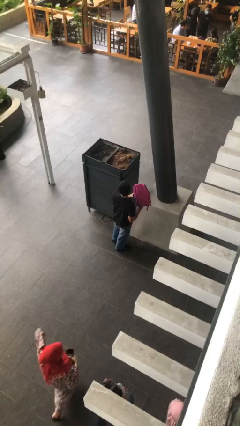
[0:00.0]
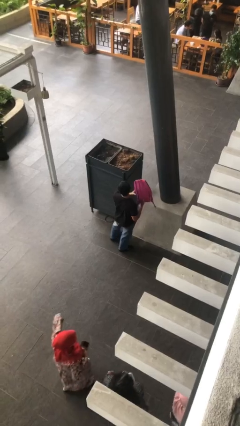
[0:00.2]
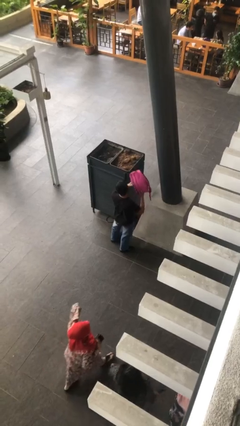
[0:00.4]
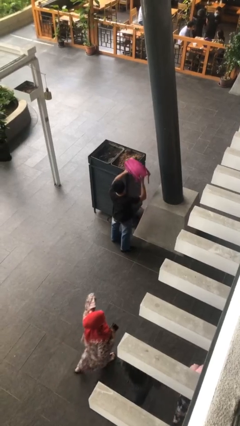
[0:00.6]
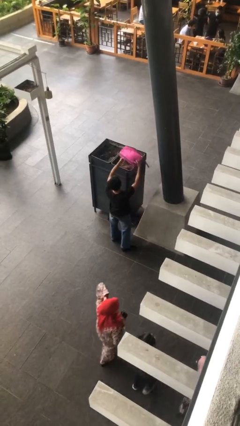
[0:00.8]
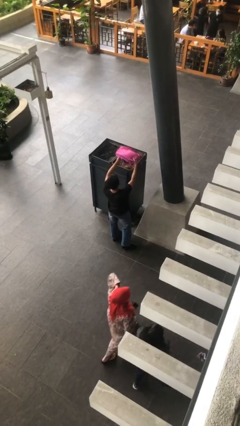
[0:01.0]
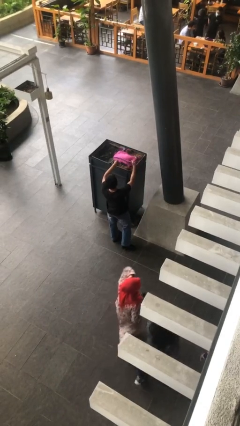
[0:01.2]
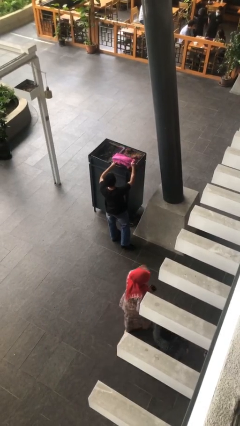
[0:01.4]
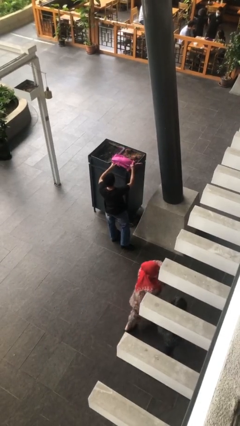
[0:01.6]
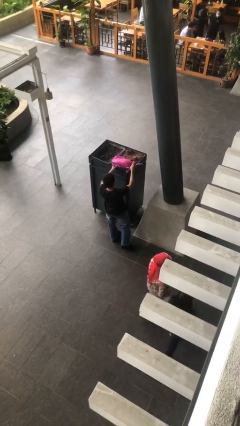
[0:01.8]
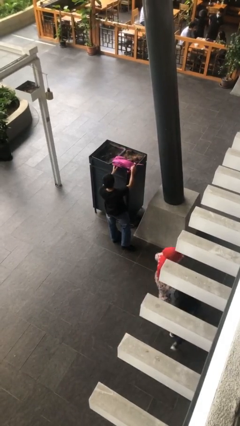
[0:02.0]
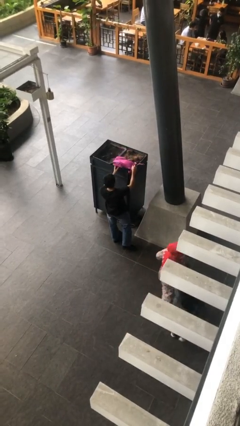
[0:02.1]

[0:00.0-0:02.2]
person puts down object on shelf

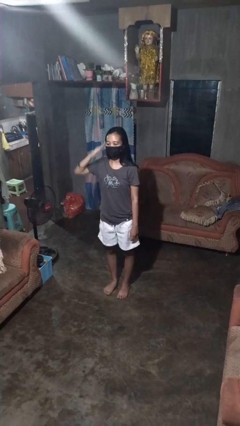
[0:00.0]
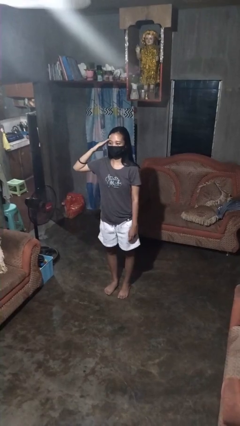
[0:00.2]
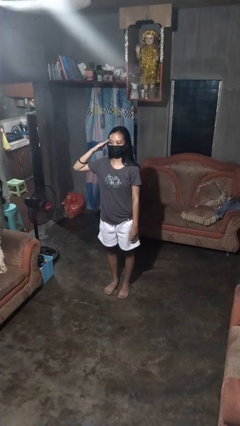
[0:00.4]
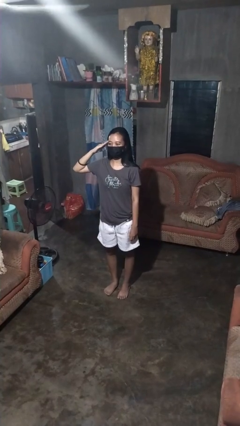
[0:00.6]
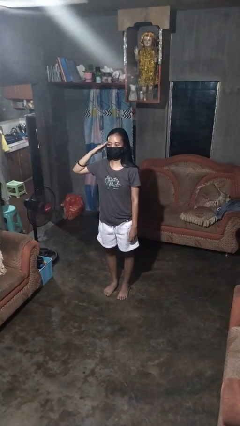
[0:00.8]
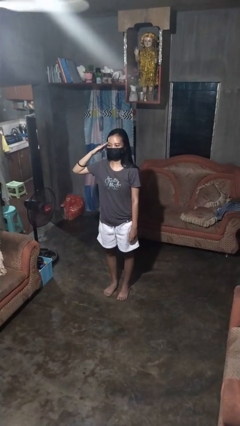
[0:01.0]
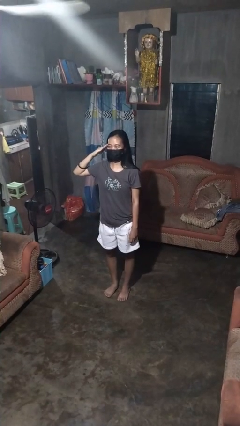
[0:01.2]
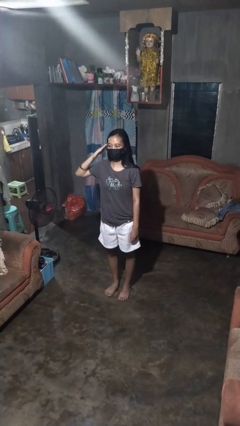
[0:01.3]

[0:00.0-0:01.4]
person salutes

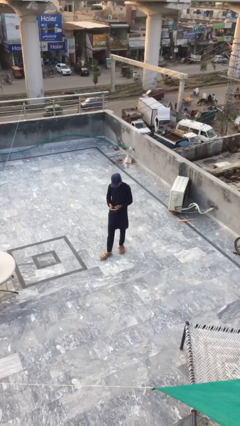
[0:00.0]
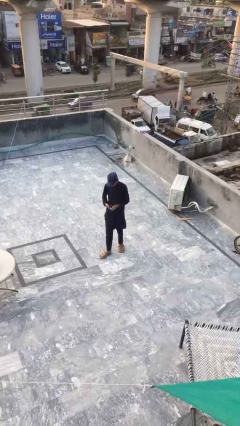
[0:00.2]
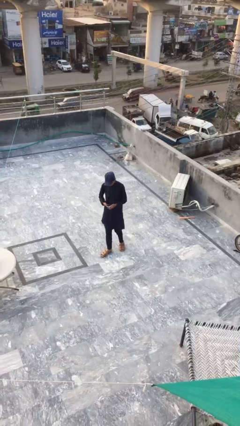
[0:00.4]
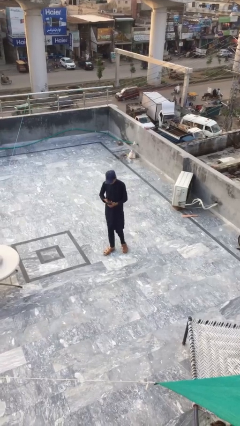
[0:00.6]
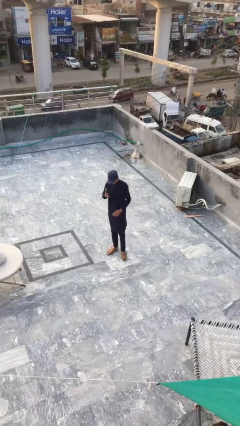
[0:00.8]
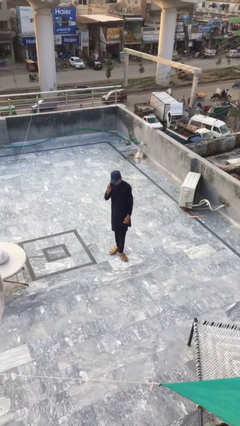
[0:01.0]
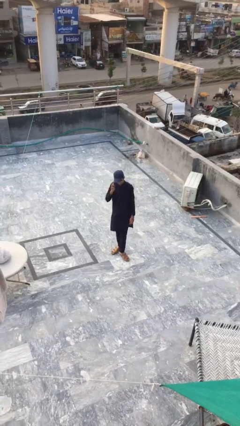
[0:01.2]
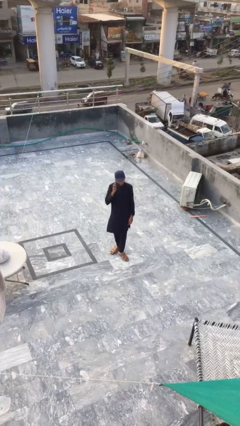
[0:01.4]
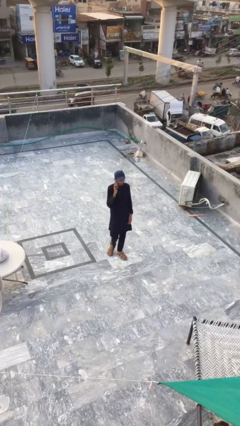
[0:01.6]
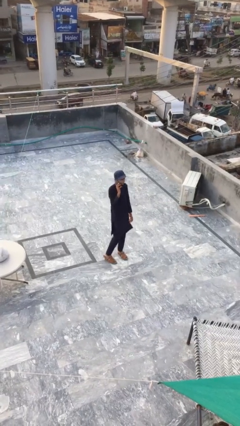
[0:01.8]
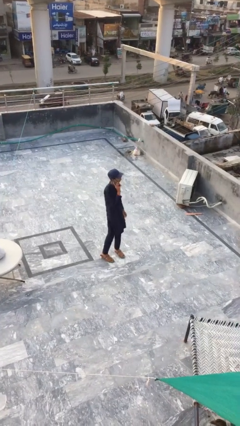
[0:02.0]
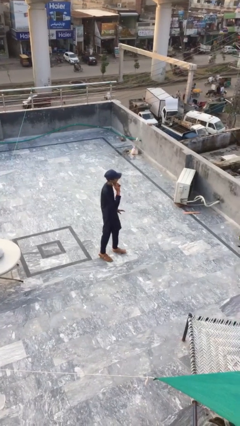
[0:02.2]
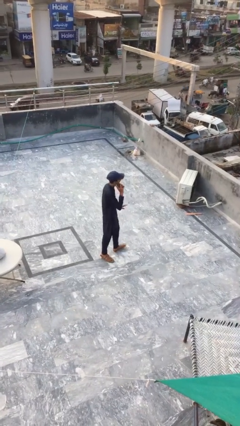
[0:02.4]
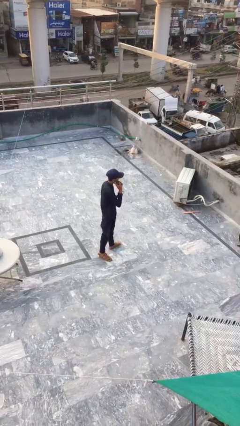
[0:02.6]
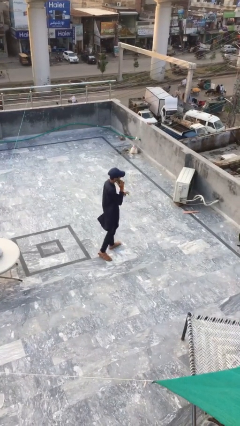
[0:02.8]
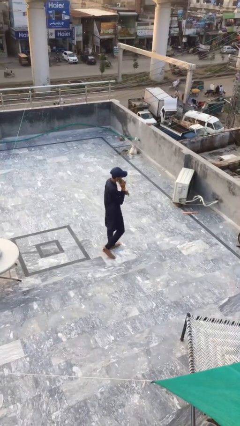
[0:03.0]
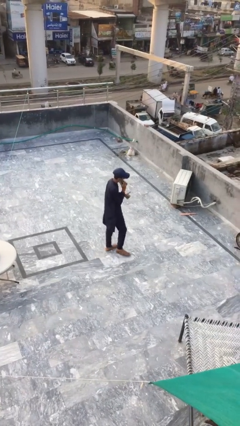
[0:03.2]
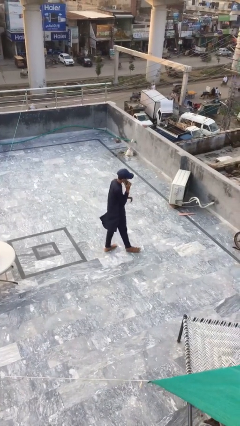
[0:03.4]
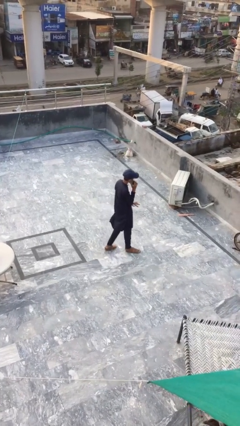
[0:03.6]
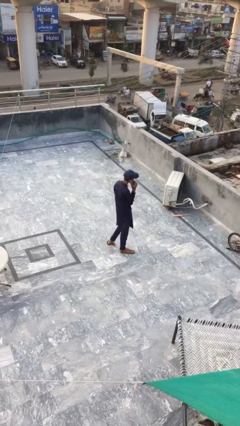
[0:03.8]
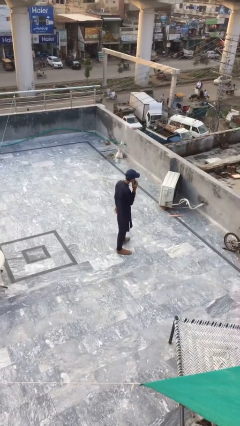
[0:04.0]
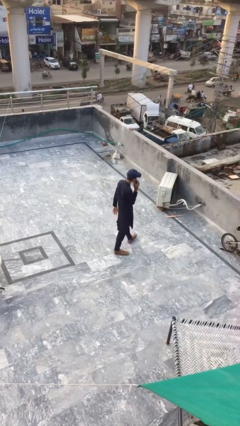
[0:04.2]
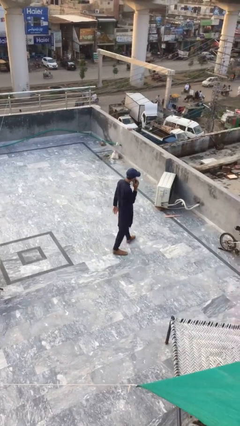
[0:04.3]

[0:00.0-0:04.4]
person talks on phone

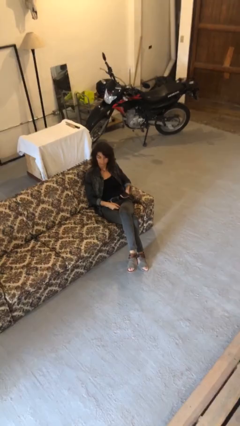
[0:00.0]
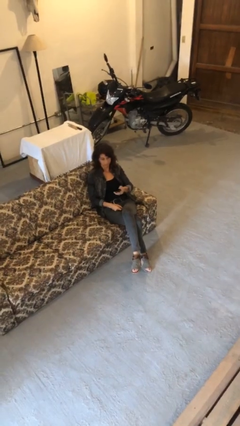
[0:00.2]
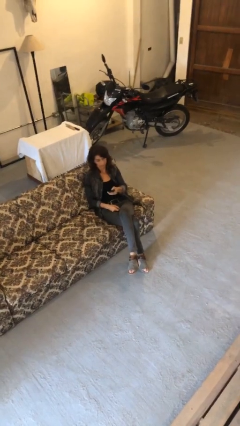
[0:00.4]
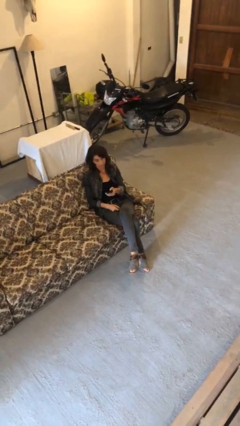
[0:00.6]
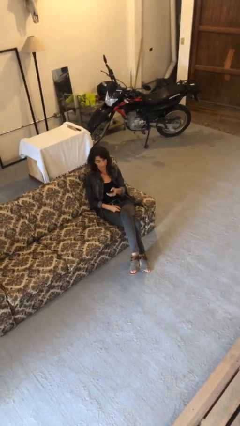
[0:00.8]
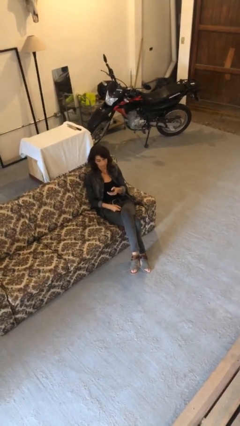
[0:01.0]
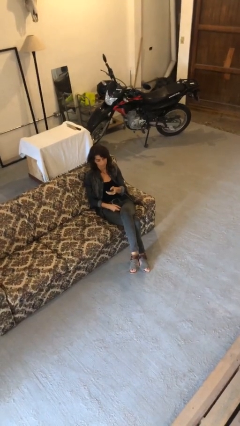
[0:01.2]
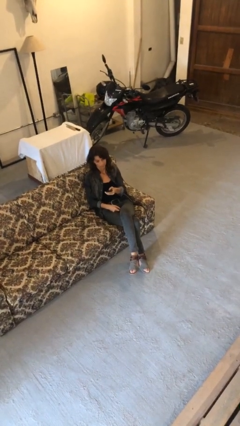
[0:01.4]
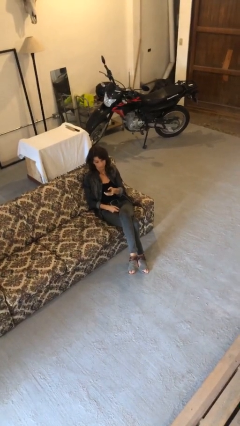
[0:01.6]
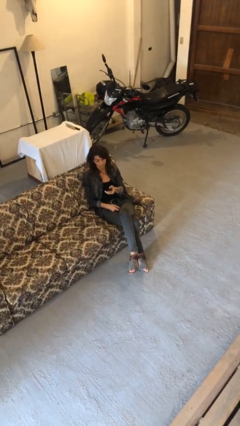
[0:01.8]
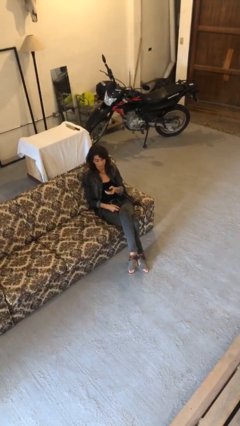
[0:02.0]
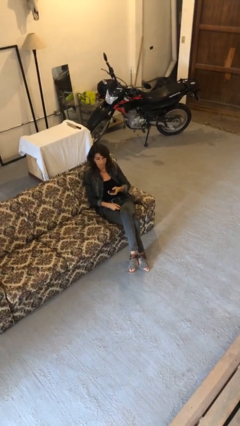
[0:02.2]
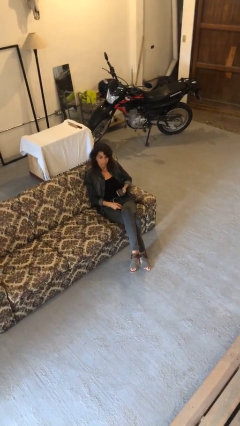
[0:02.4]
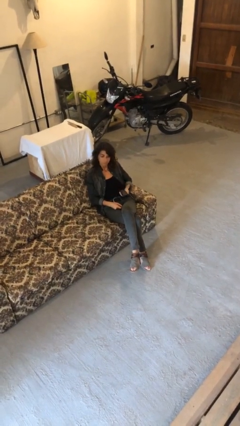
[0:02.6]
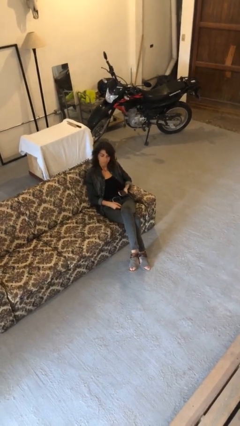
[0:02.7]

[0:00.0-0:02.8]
person uses television remote

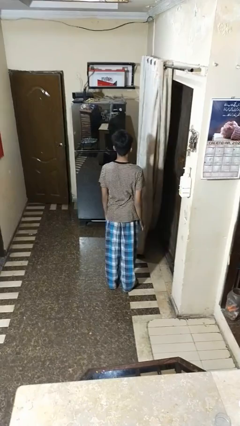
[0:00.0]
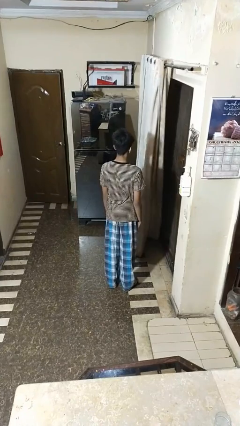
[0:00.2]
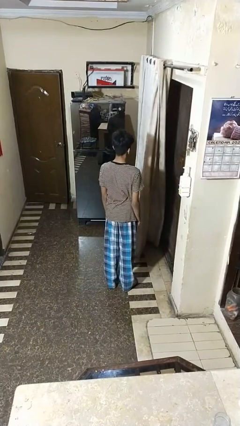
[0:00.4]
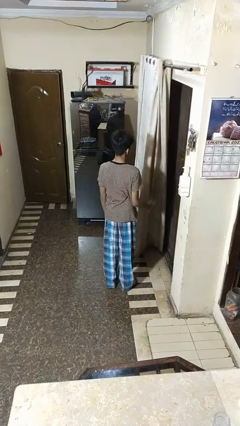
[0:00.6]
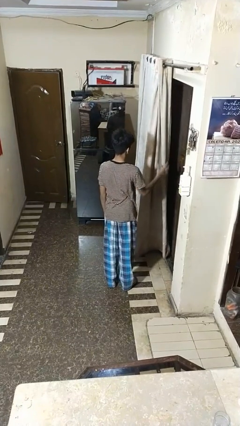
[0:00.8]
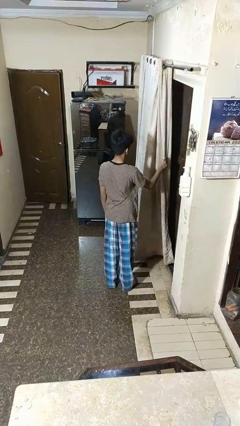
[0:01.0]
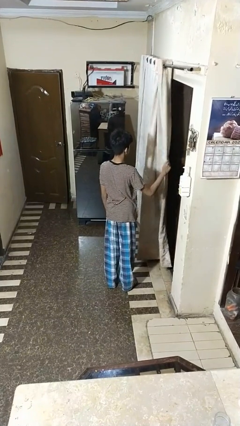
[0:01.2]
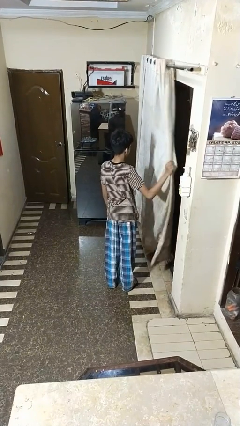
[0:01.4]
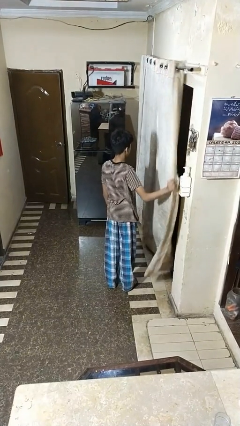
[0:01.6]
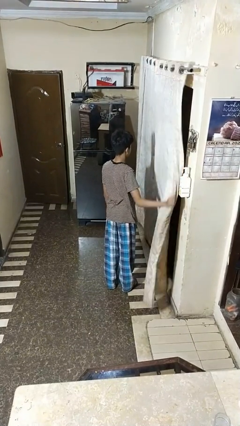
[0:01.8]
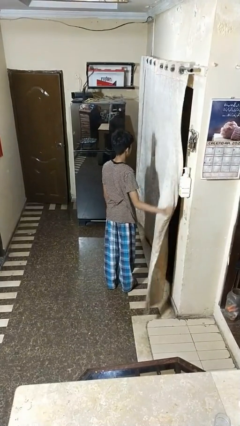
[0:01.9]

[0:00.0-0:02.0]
person closes curtains

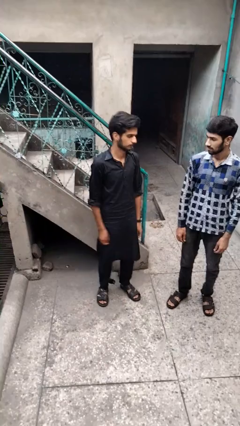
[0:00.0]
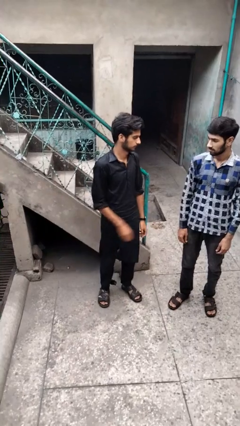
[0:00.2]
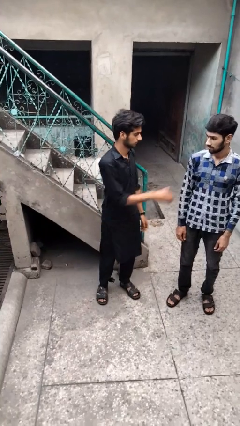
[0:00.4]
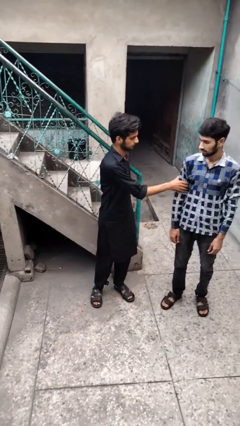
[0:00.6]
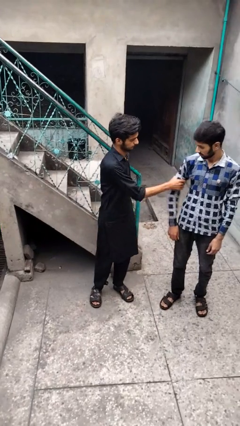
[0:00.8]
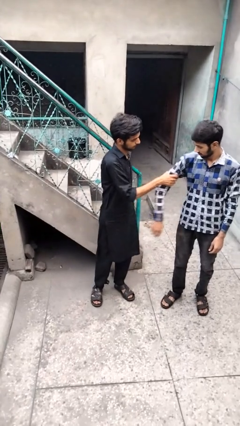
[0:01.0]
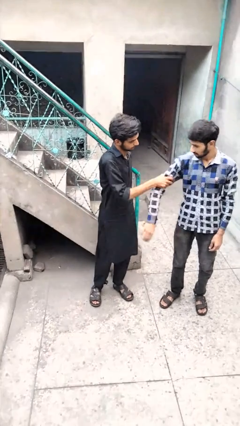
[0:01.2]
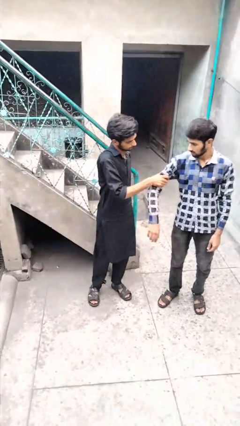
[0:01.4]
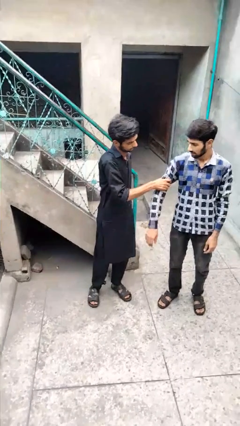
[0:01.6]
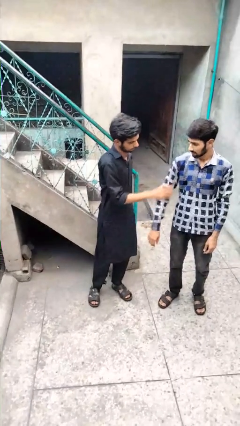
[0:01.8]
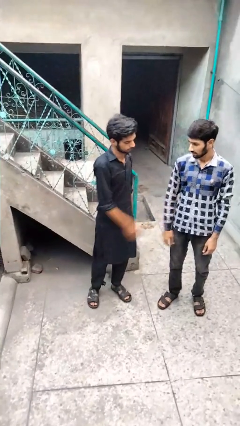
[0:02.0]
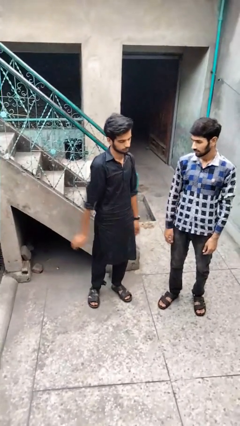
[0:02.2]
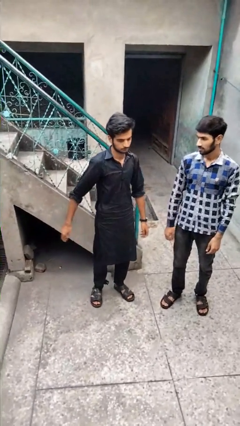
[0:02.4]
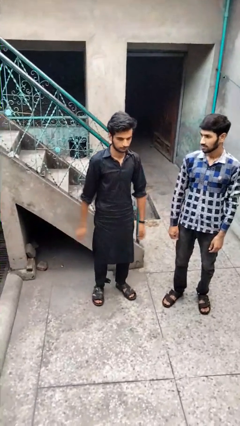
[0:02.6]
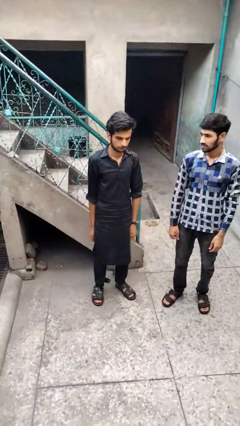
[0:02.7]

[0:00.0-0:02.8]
person grabs person by bicep

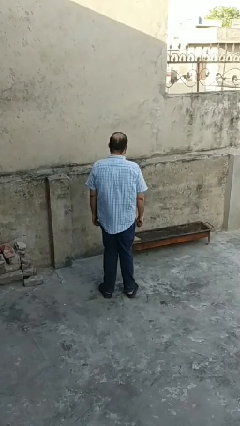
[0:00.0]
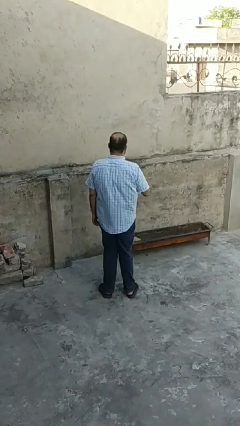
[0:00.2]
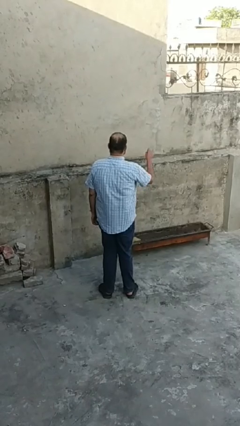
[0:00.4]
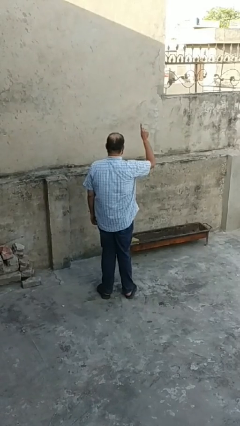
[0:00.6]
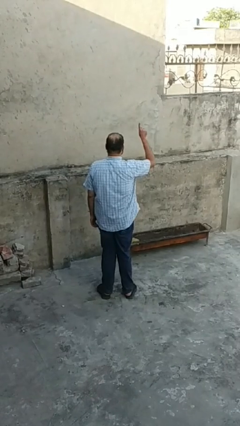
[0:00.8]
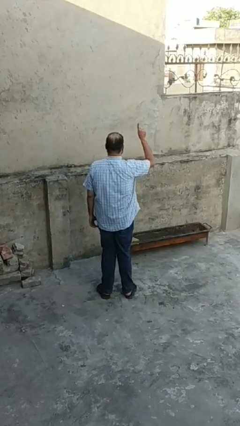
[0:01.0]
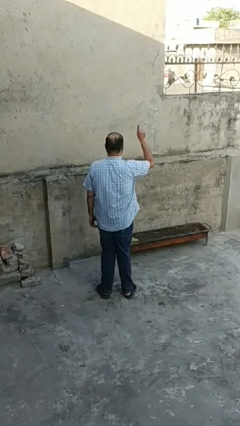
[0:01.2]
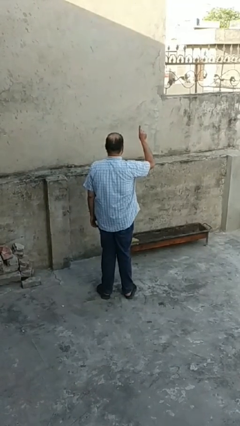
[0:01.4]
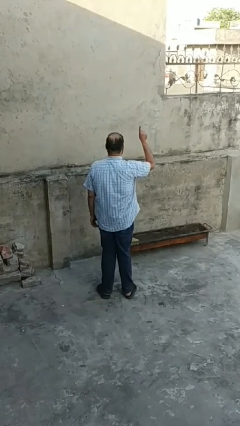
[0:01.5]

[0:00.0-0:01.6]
person gestures number one
